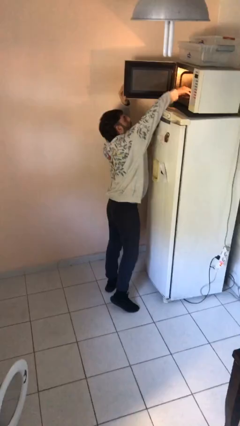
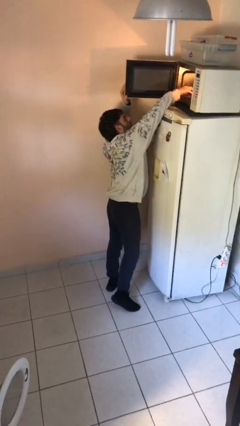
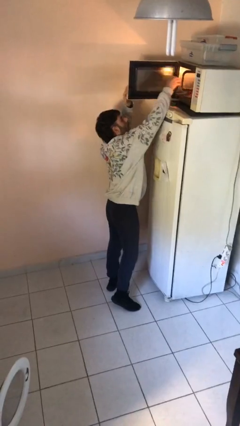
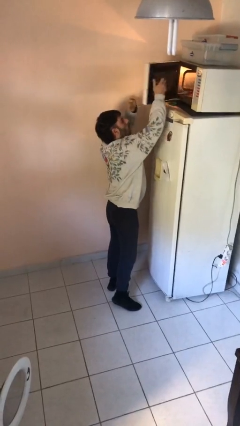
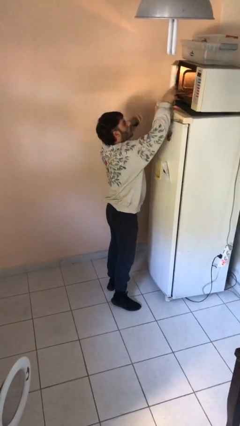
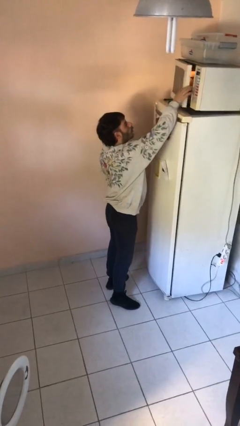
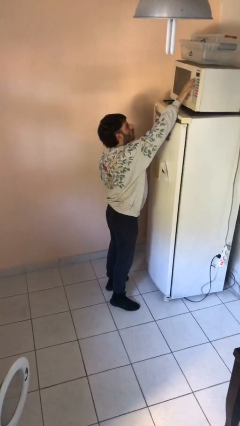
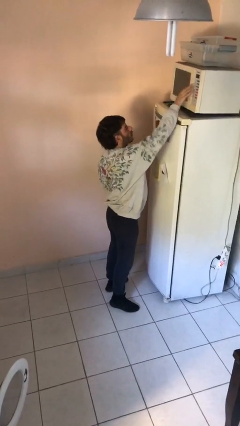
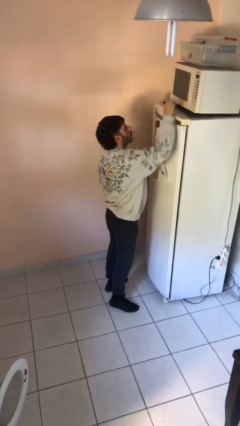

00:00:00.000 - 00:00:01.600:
person closes microwave

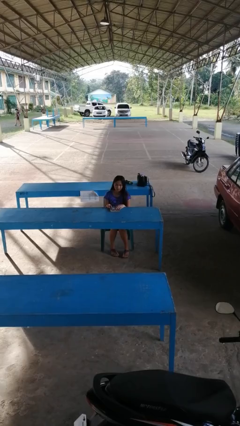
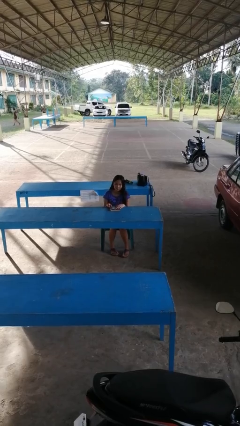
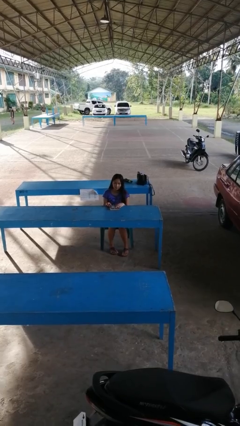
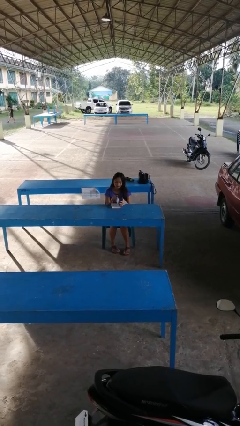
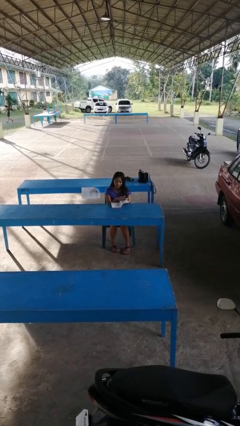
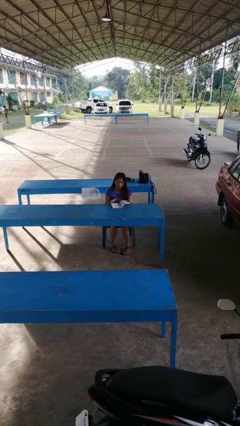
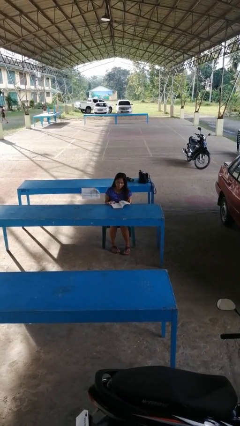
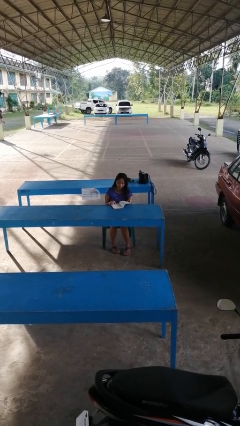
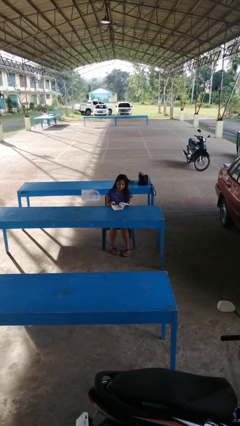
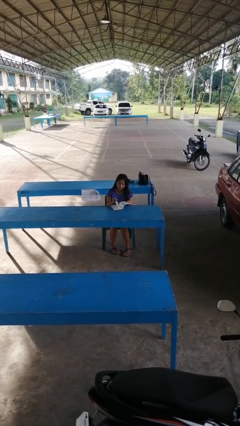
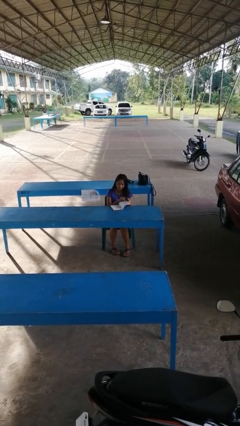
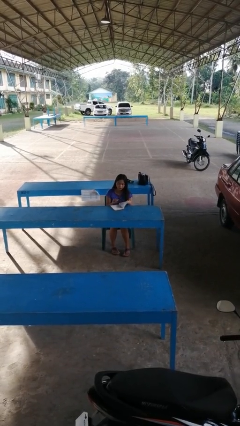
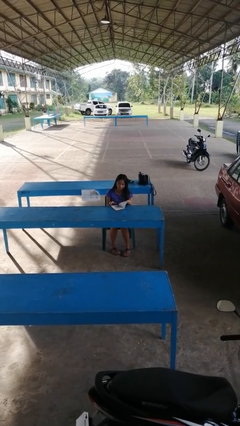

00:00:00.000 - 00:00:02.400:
person reads book

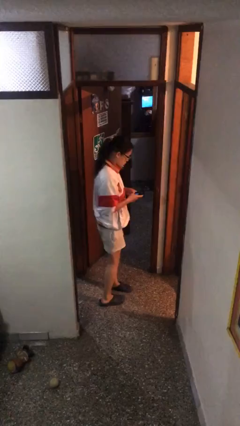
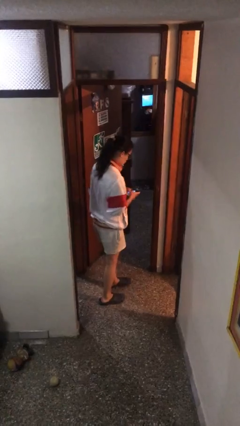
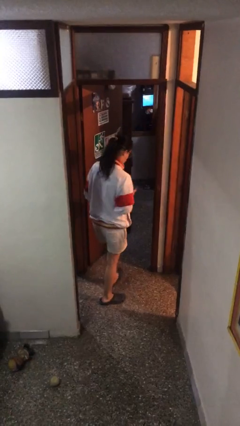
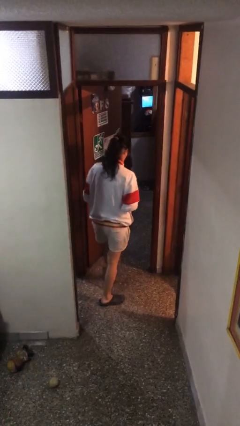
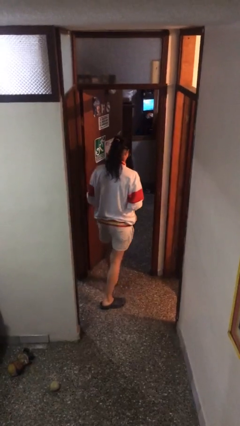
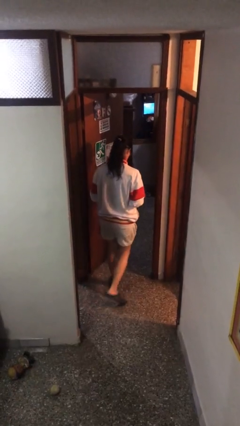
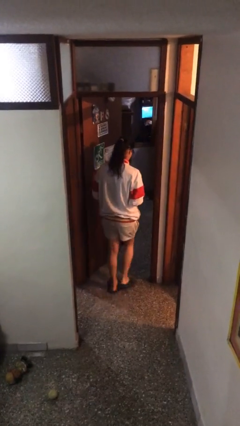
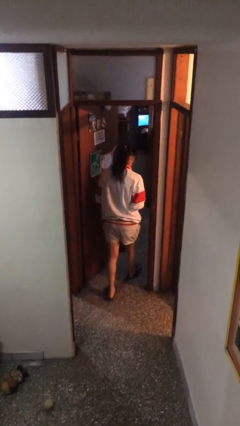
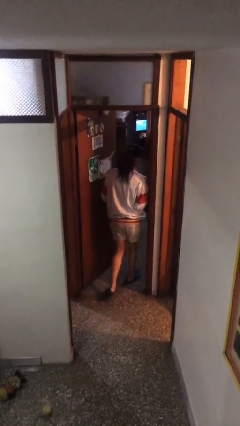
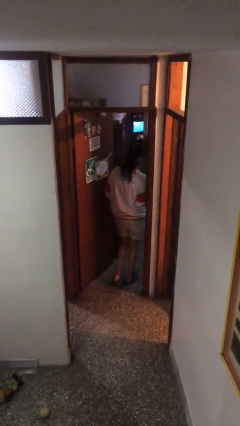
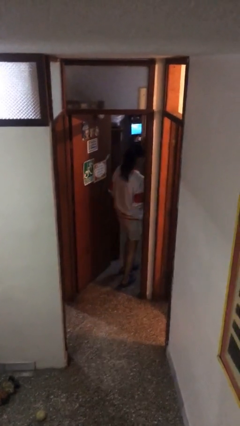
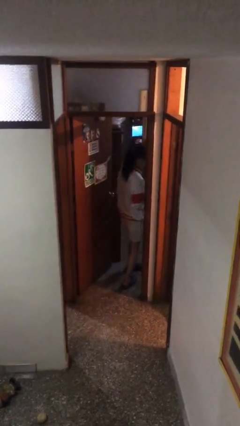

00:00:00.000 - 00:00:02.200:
person exits scene through structure

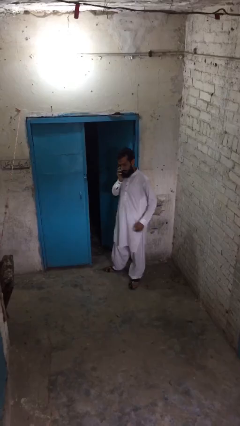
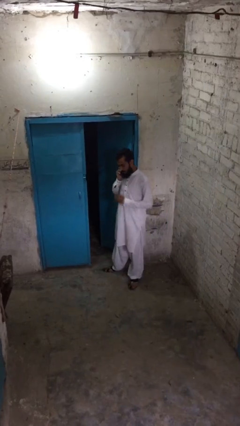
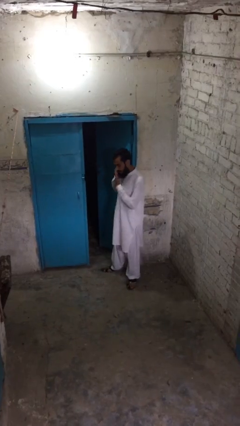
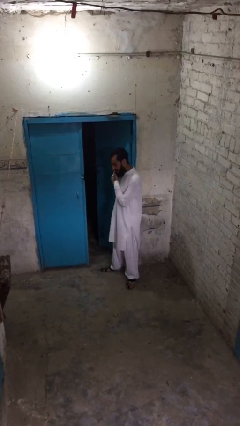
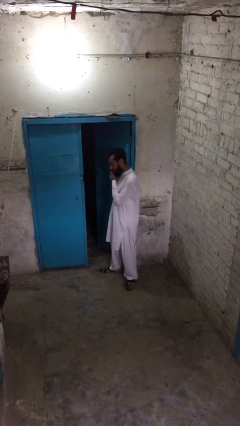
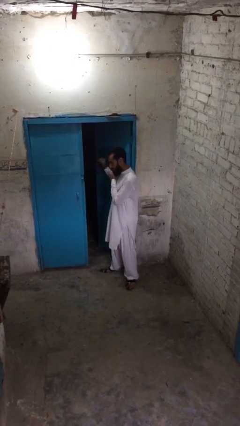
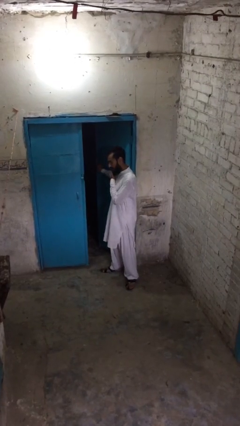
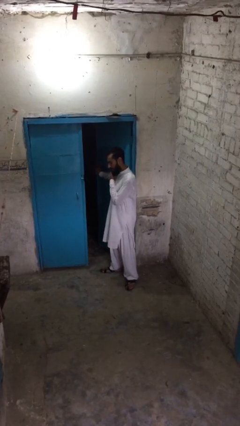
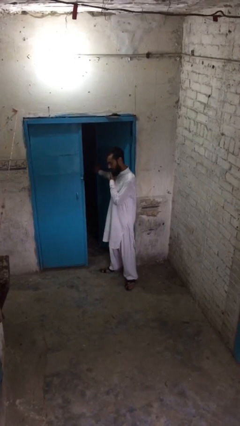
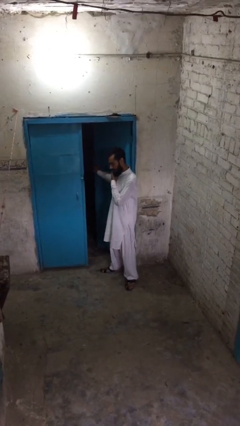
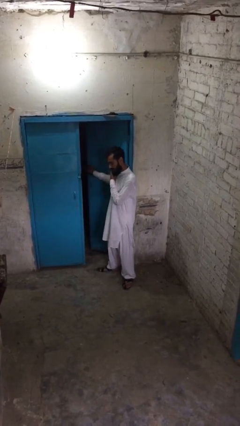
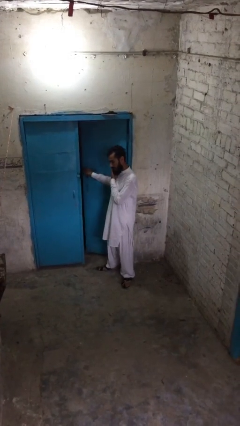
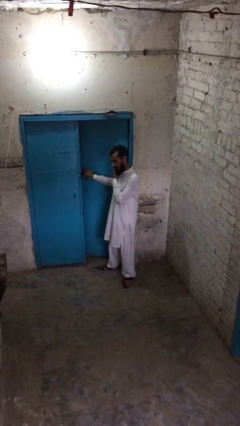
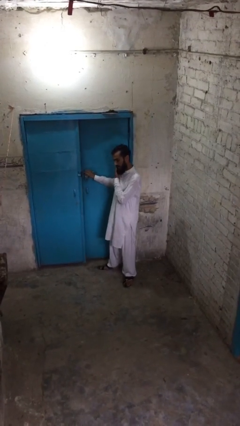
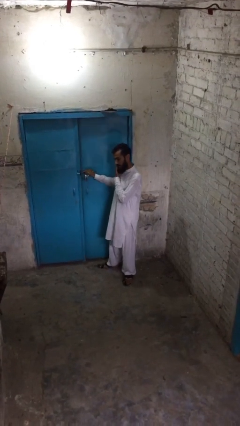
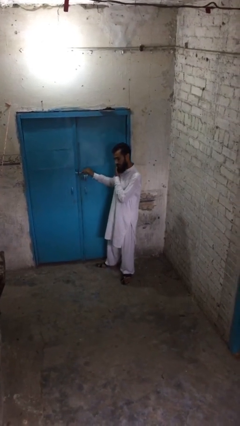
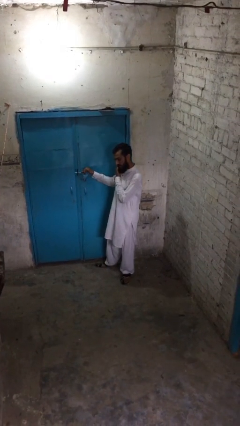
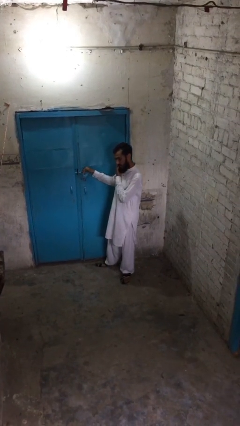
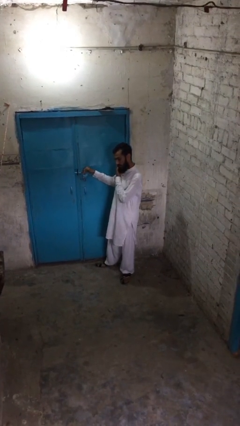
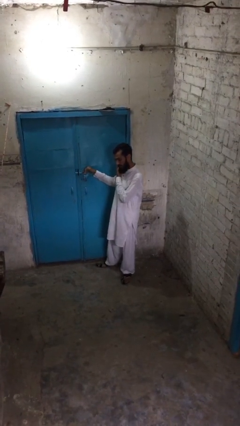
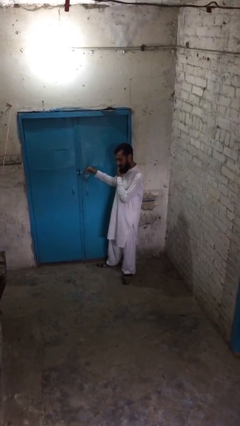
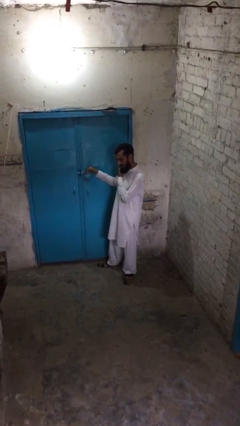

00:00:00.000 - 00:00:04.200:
person closes facility door

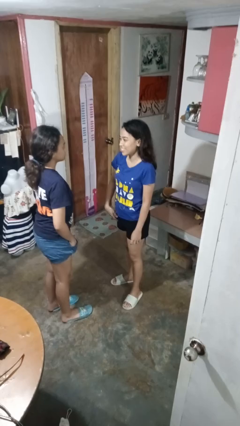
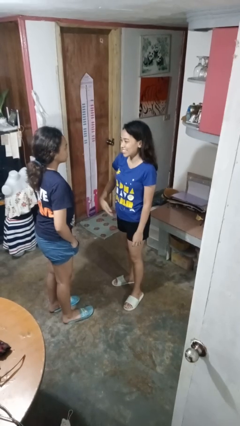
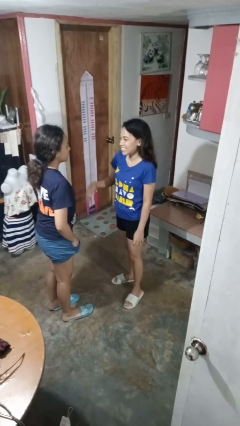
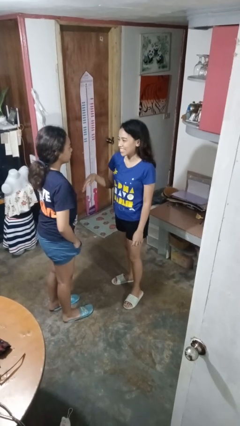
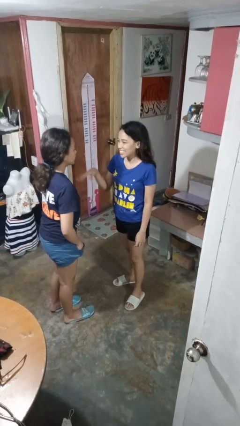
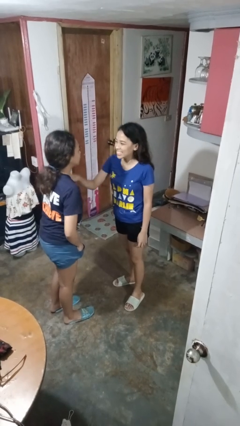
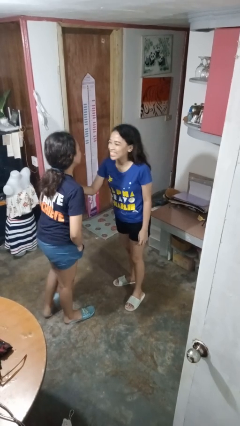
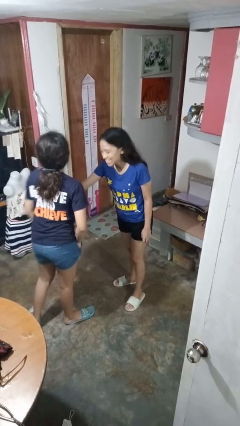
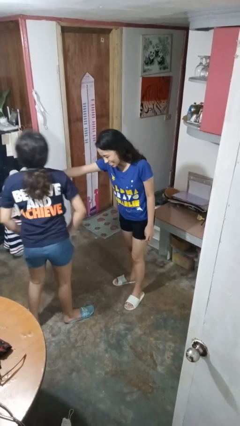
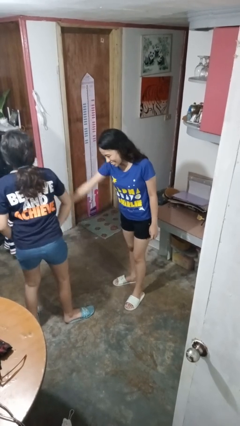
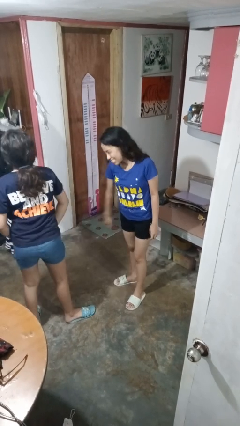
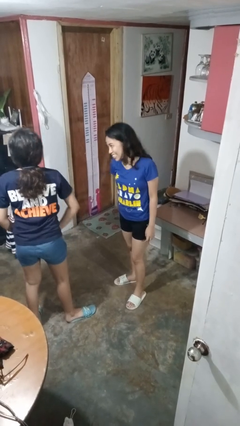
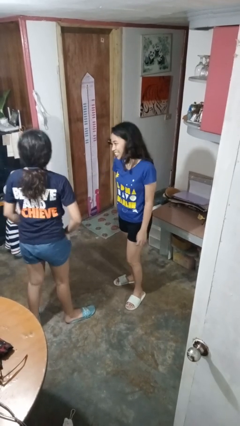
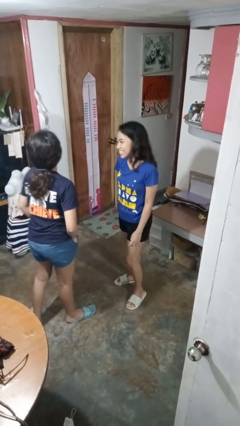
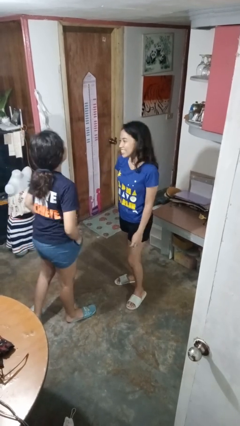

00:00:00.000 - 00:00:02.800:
person shoves person

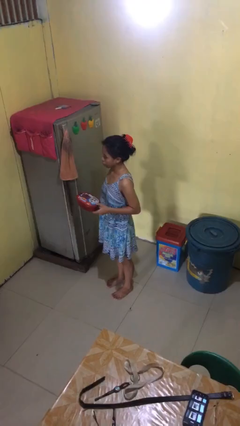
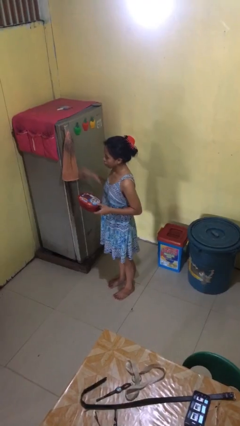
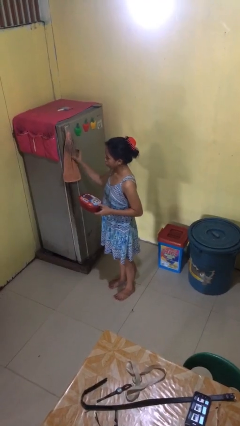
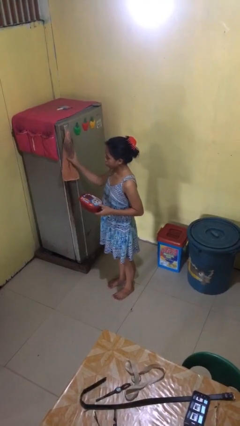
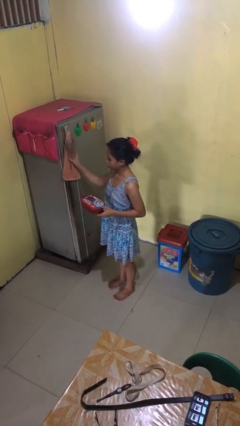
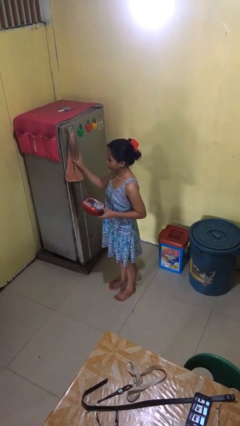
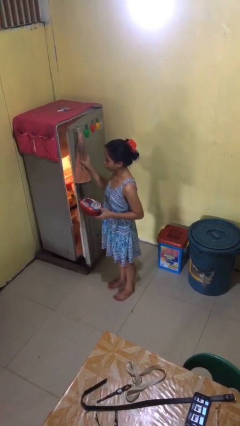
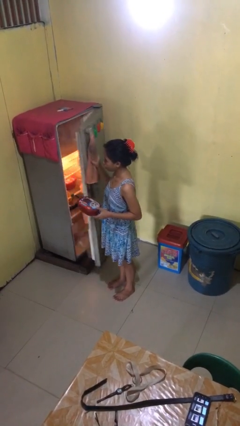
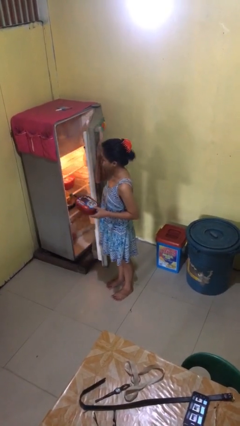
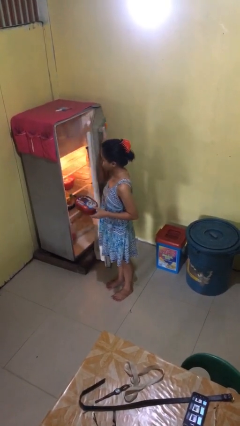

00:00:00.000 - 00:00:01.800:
person opens refrigerator

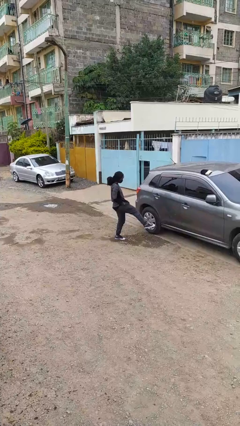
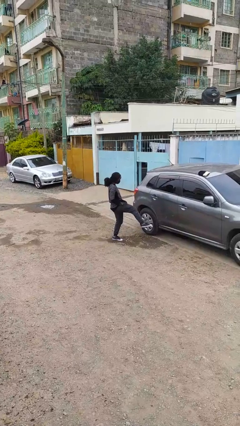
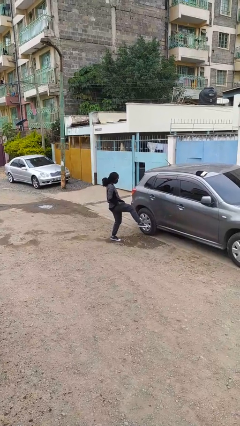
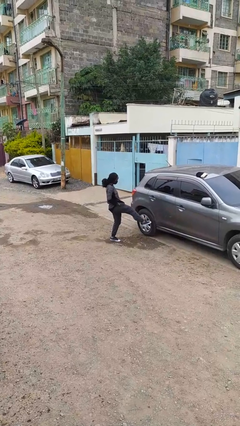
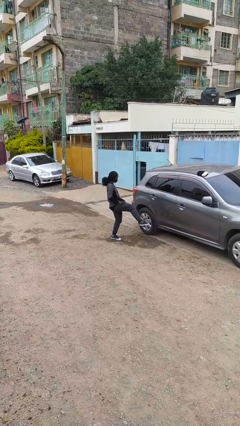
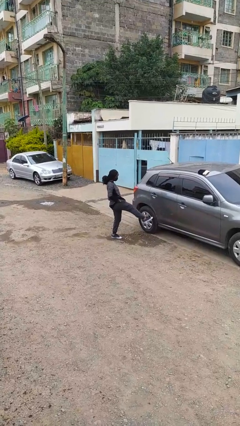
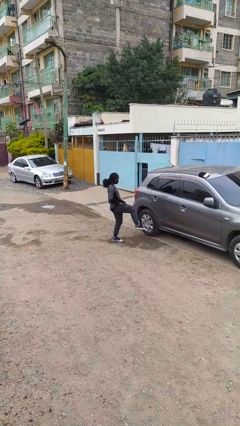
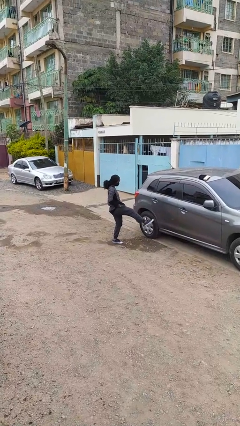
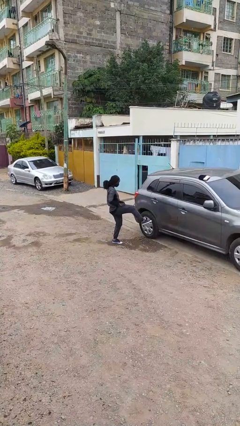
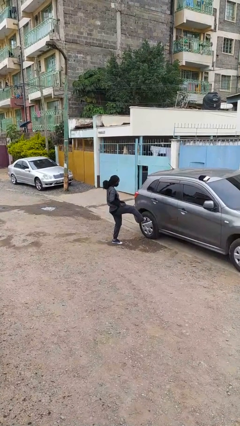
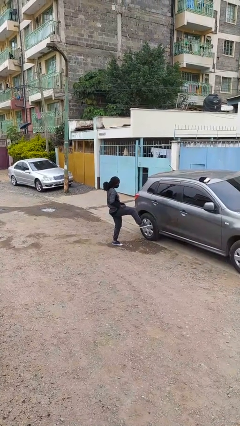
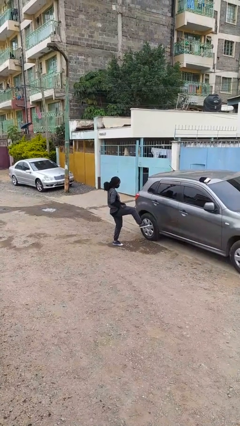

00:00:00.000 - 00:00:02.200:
person kicks car tires
